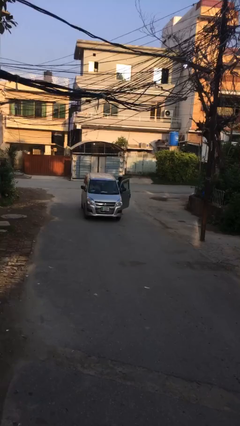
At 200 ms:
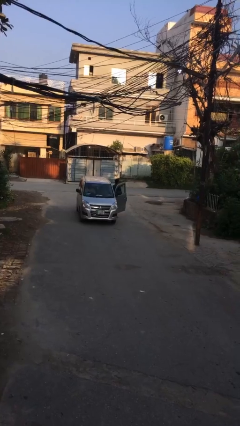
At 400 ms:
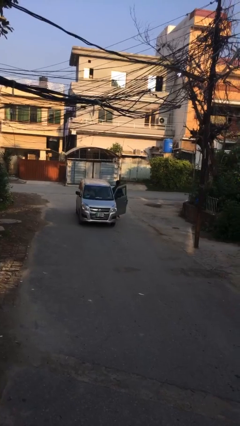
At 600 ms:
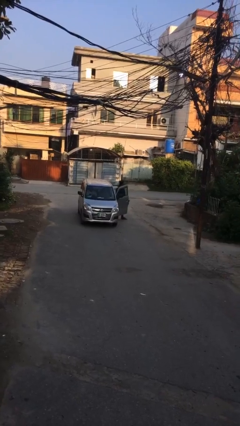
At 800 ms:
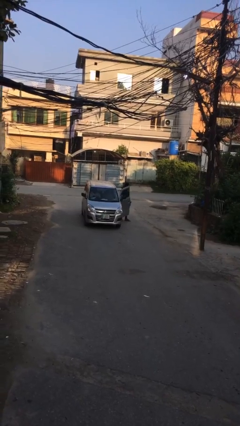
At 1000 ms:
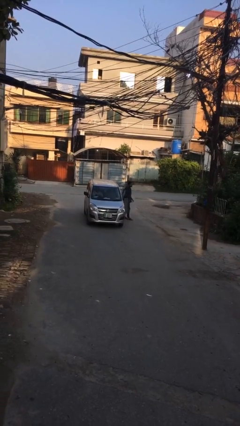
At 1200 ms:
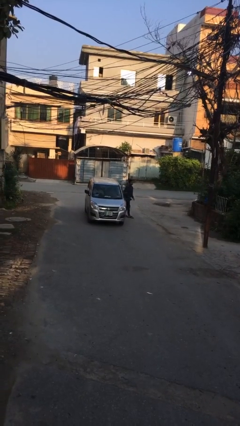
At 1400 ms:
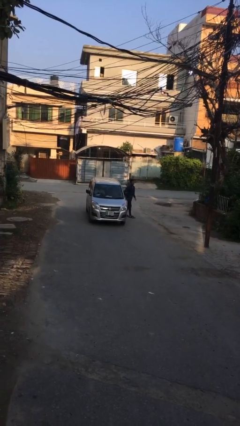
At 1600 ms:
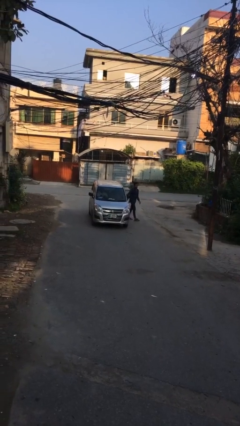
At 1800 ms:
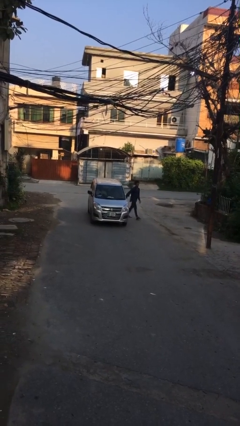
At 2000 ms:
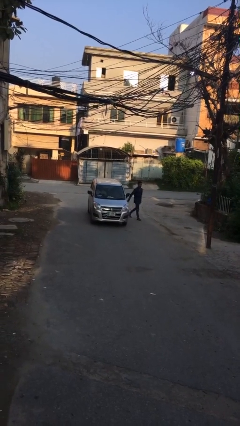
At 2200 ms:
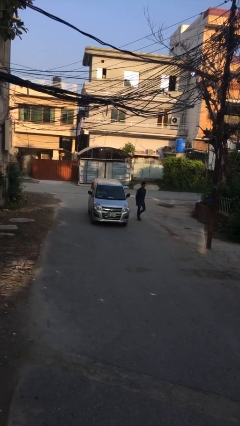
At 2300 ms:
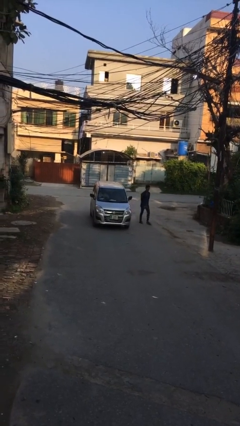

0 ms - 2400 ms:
car drops off person

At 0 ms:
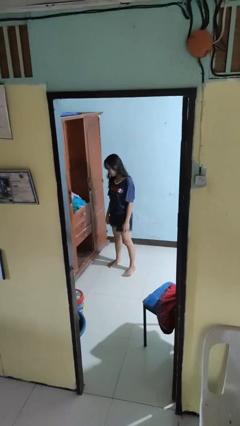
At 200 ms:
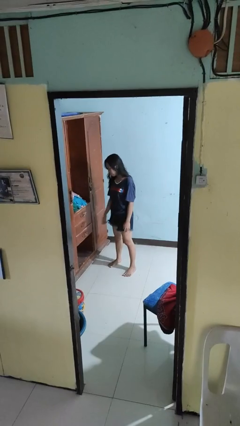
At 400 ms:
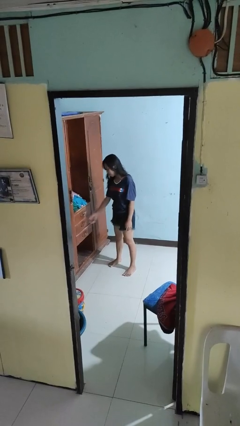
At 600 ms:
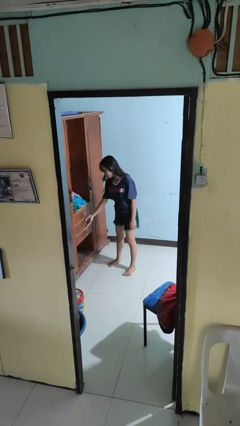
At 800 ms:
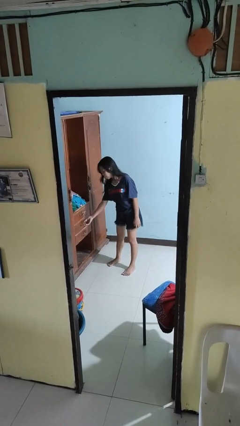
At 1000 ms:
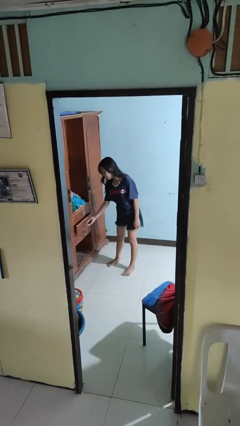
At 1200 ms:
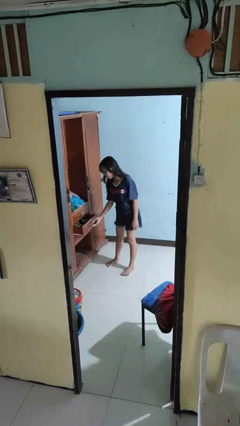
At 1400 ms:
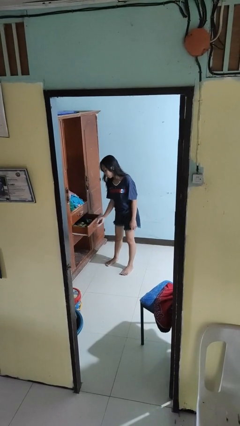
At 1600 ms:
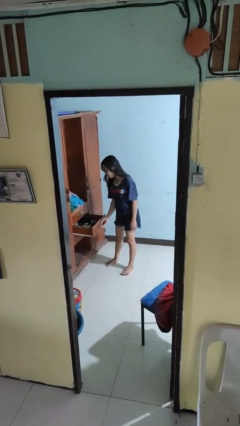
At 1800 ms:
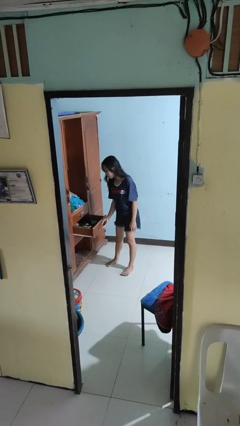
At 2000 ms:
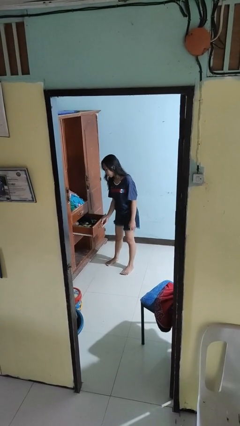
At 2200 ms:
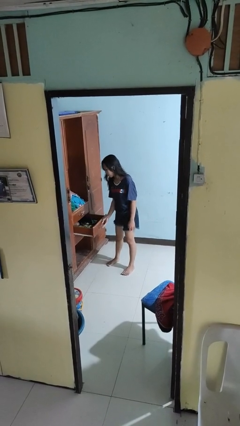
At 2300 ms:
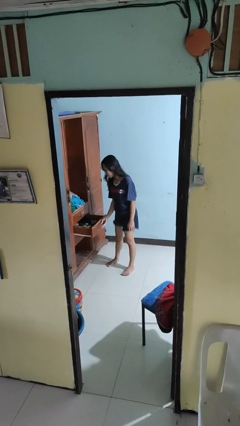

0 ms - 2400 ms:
person opens dresser drawer

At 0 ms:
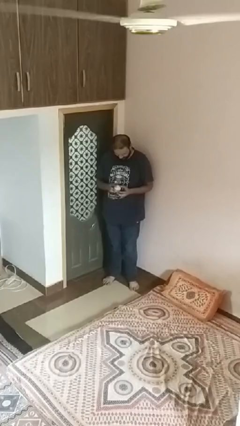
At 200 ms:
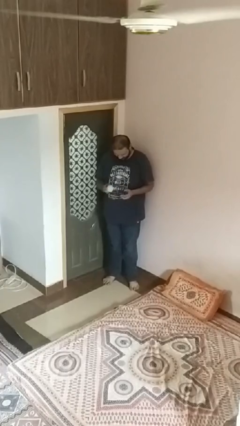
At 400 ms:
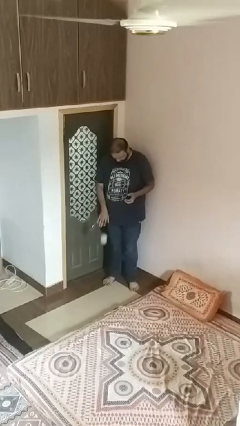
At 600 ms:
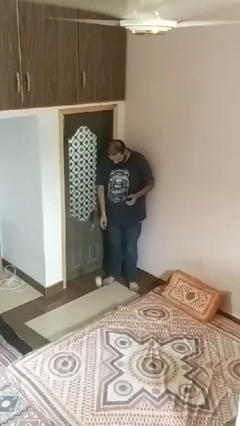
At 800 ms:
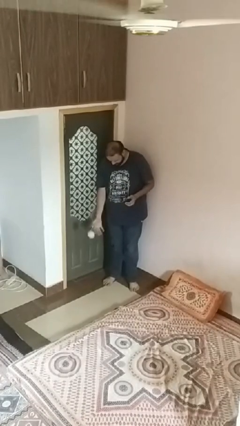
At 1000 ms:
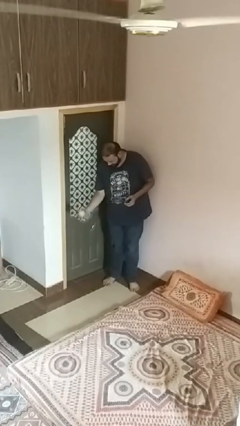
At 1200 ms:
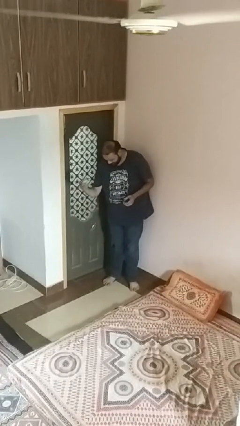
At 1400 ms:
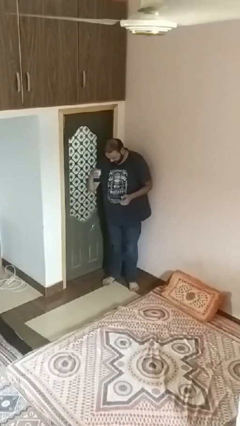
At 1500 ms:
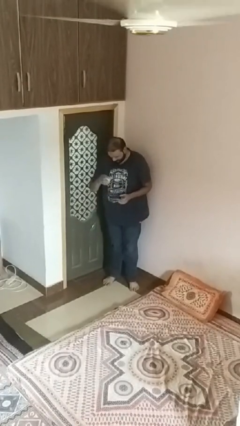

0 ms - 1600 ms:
person bounces ball on floor

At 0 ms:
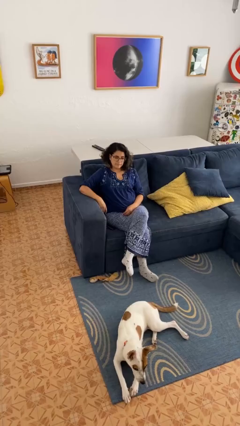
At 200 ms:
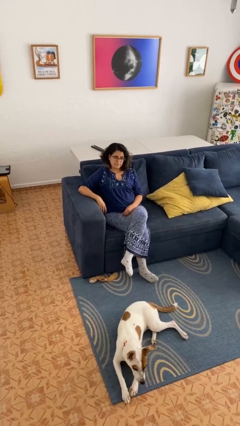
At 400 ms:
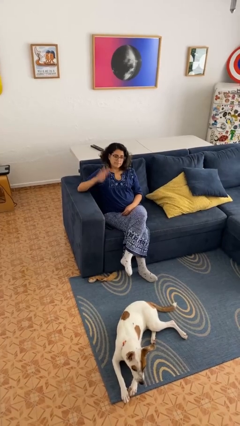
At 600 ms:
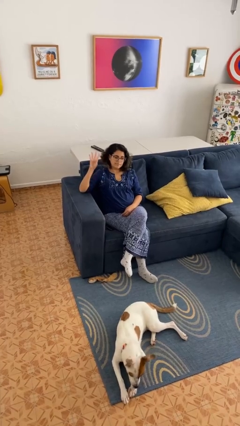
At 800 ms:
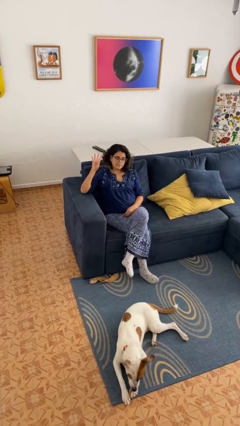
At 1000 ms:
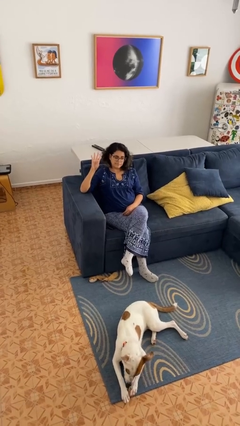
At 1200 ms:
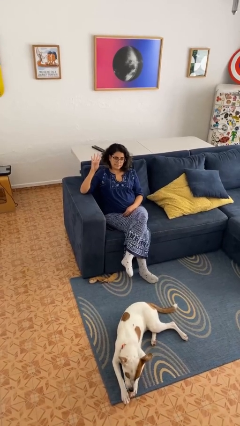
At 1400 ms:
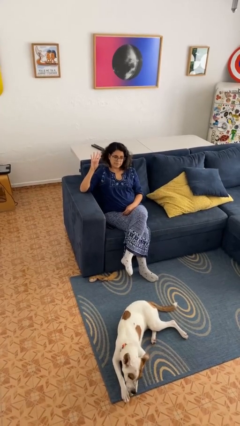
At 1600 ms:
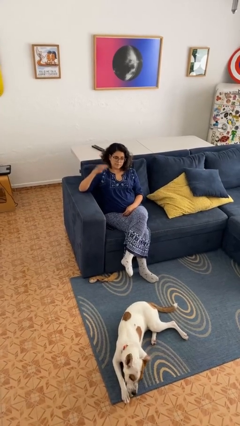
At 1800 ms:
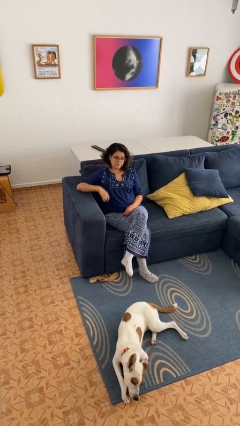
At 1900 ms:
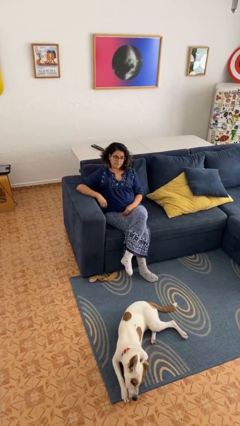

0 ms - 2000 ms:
person gestures number four

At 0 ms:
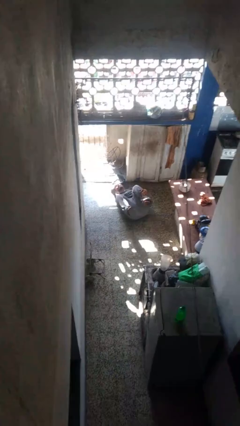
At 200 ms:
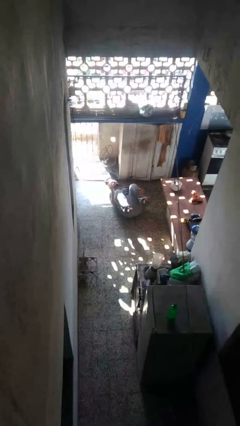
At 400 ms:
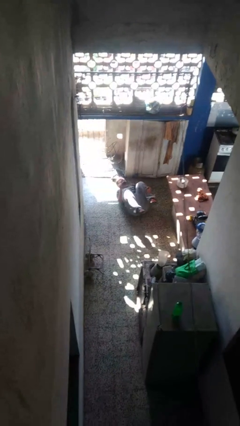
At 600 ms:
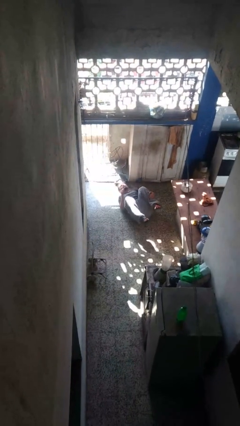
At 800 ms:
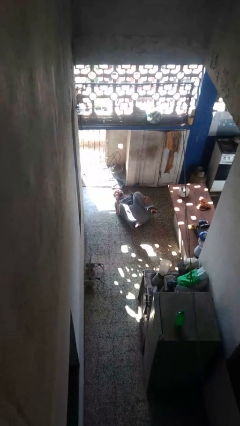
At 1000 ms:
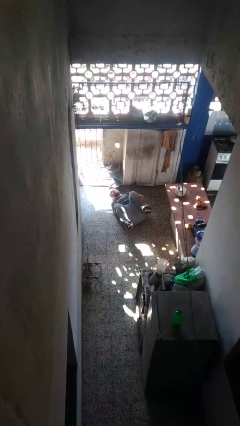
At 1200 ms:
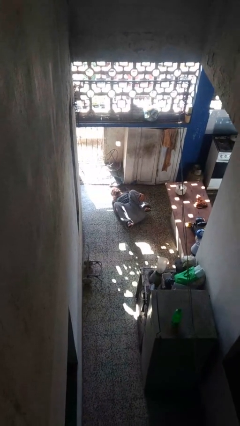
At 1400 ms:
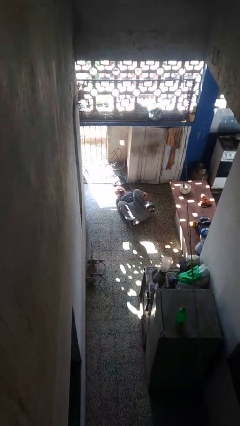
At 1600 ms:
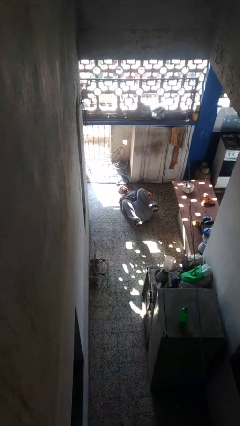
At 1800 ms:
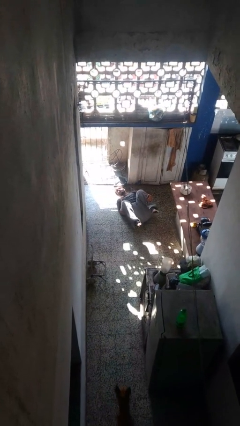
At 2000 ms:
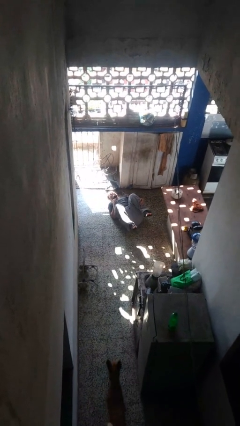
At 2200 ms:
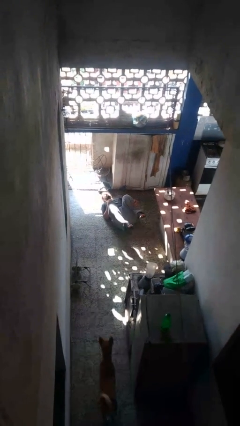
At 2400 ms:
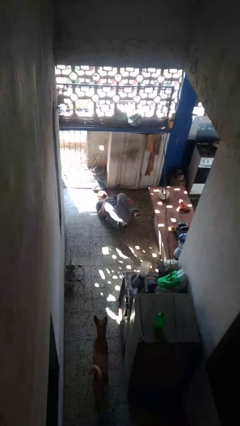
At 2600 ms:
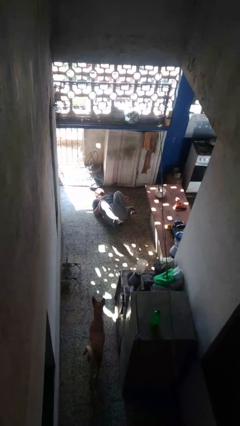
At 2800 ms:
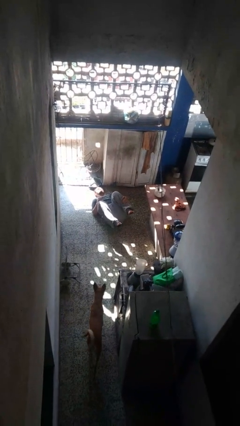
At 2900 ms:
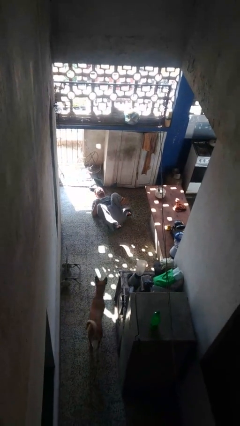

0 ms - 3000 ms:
person lies down on floor

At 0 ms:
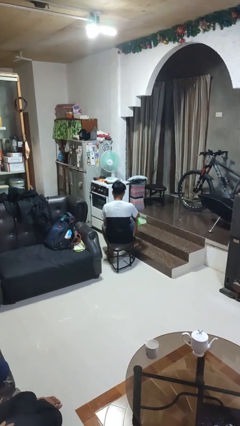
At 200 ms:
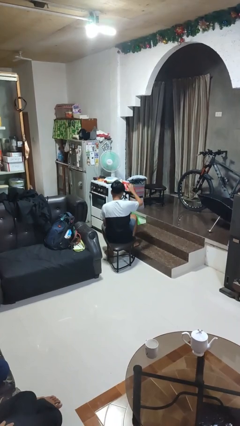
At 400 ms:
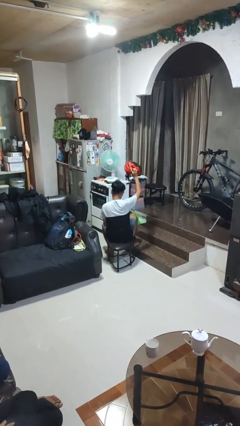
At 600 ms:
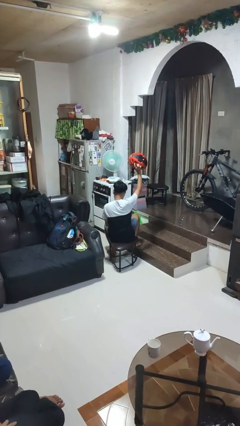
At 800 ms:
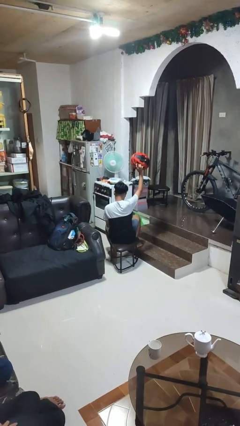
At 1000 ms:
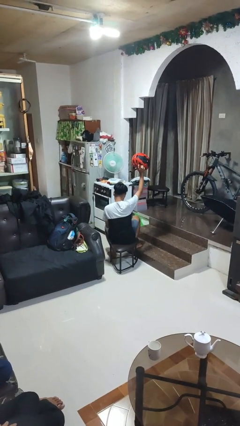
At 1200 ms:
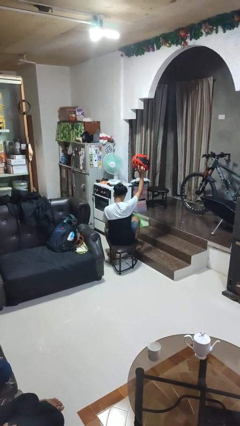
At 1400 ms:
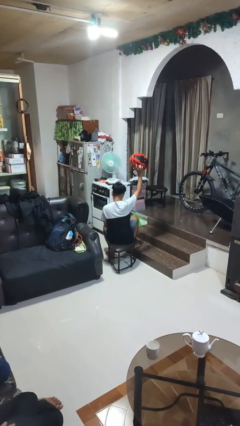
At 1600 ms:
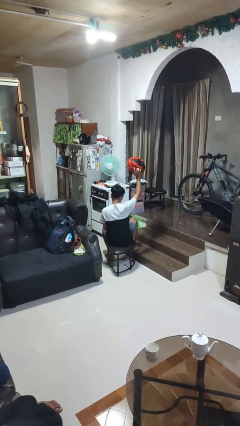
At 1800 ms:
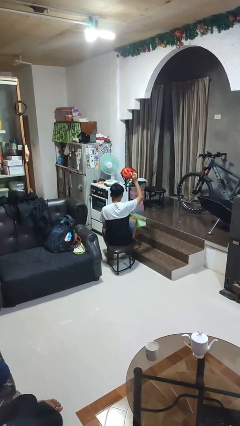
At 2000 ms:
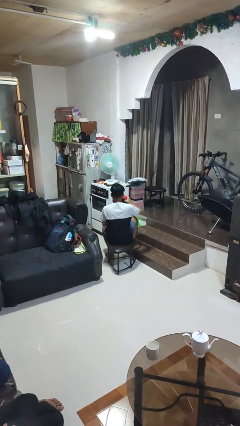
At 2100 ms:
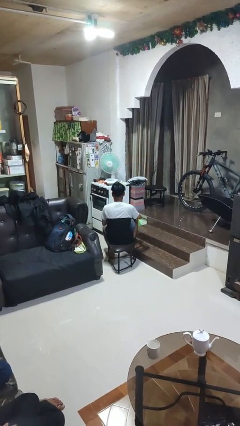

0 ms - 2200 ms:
person holds object above head

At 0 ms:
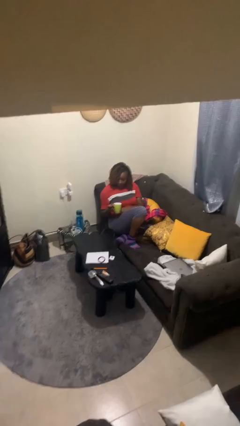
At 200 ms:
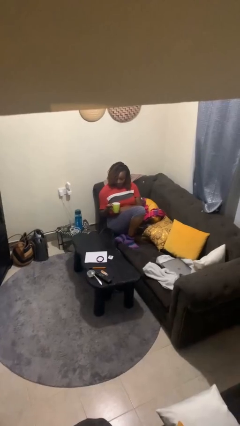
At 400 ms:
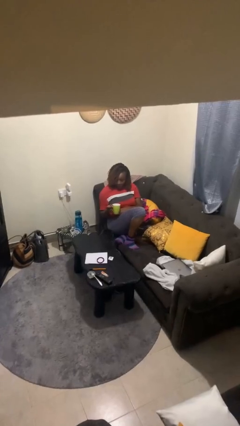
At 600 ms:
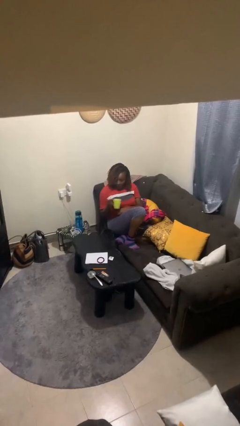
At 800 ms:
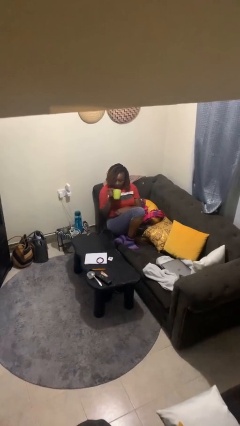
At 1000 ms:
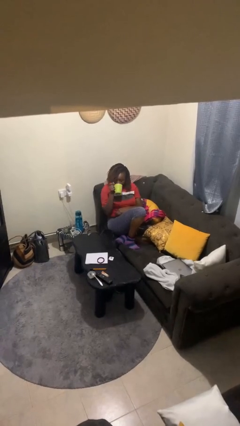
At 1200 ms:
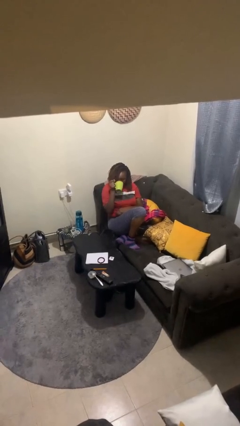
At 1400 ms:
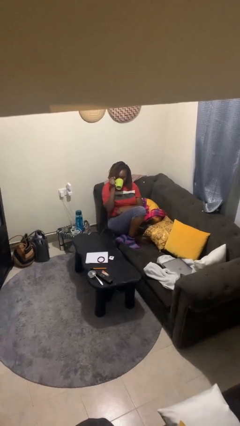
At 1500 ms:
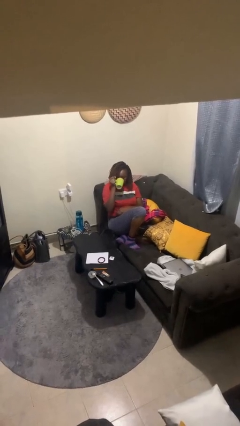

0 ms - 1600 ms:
person drinks from mug

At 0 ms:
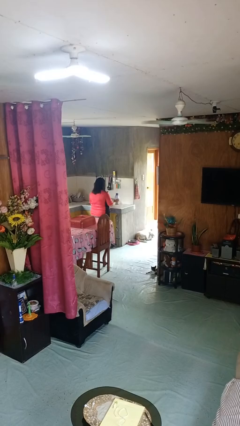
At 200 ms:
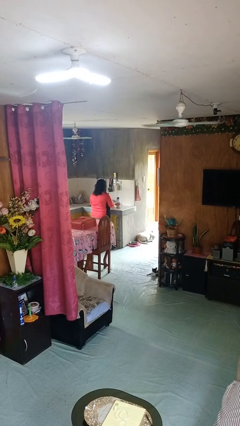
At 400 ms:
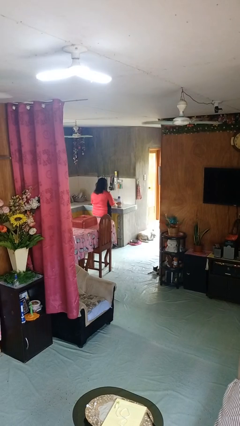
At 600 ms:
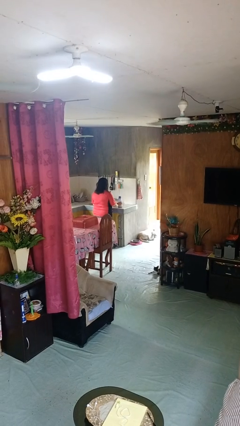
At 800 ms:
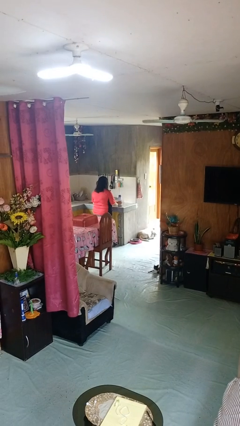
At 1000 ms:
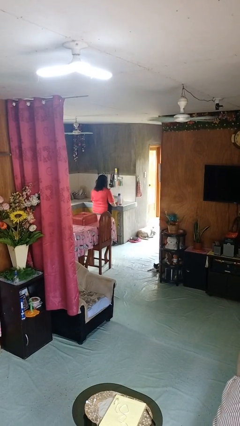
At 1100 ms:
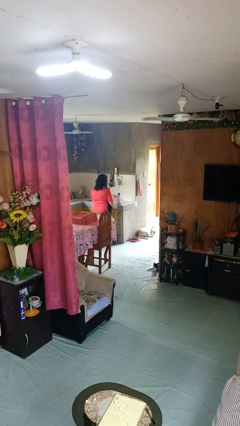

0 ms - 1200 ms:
person puts down object on countertop

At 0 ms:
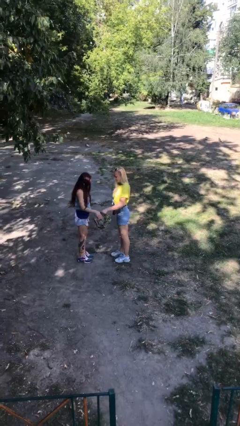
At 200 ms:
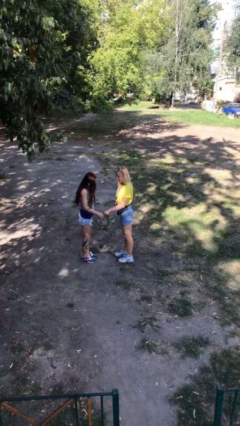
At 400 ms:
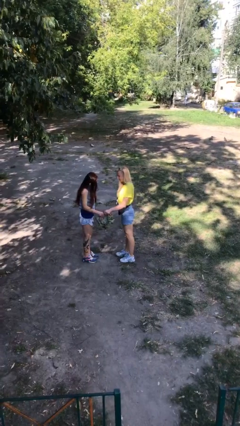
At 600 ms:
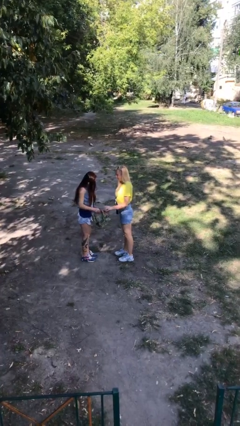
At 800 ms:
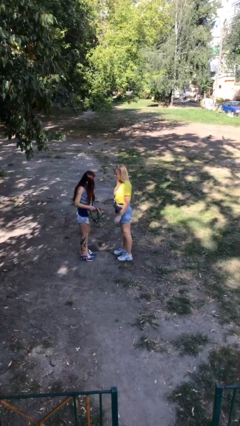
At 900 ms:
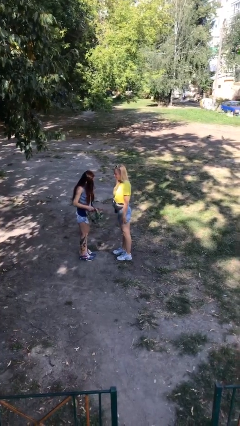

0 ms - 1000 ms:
person transfers object to person
